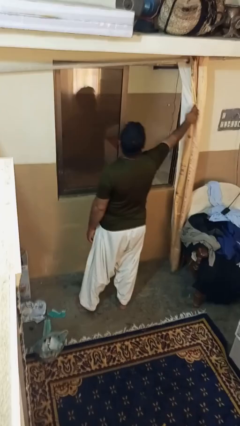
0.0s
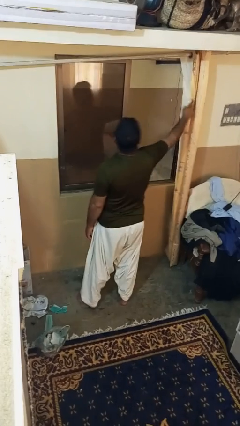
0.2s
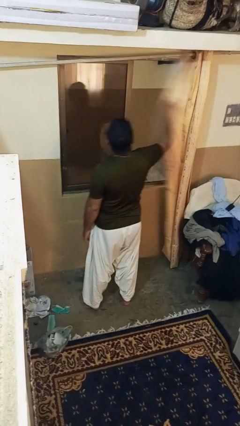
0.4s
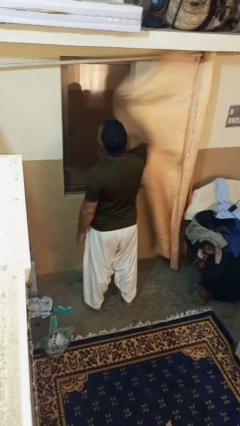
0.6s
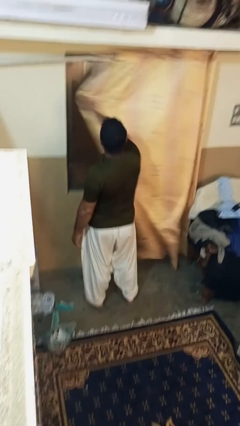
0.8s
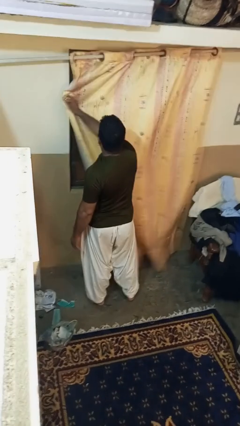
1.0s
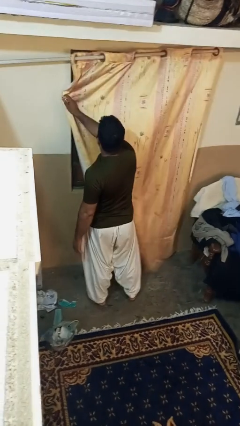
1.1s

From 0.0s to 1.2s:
person closes curtains

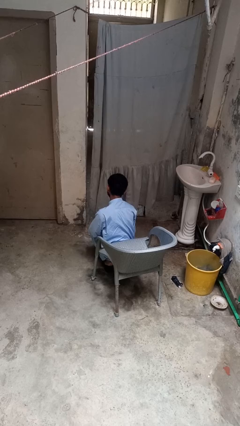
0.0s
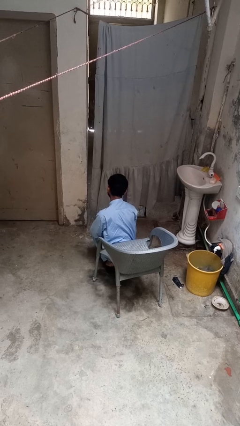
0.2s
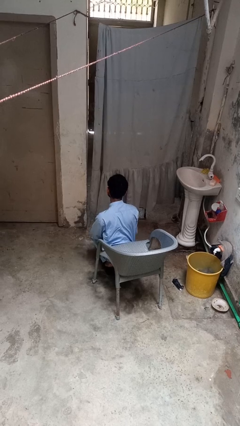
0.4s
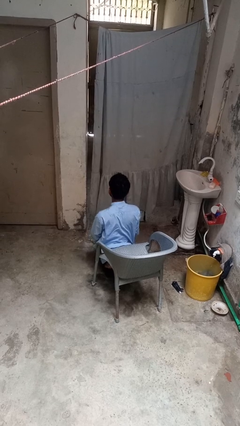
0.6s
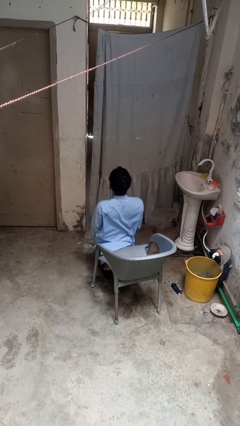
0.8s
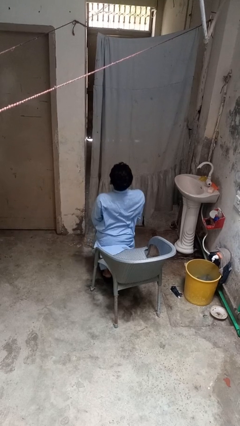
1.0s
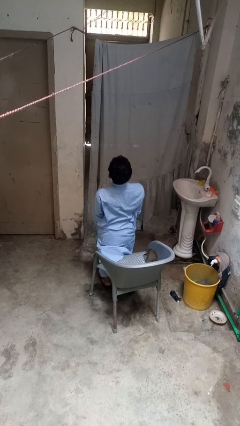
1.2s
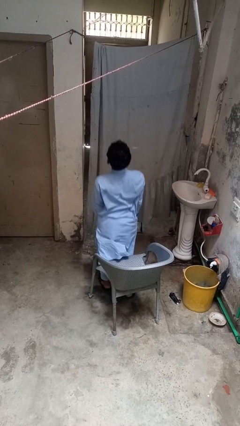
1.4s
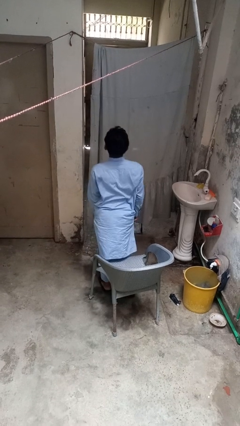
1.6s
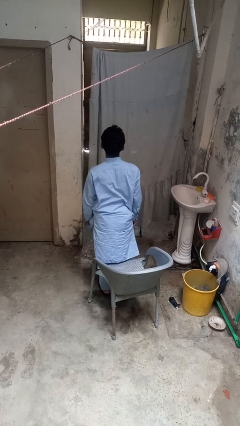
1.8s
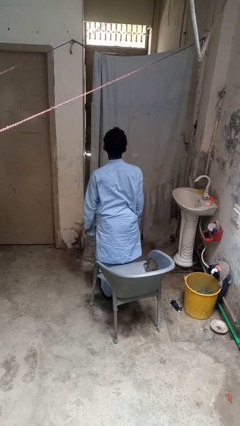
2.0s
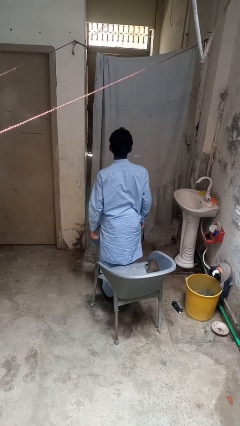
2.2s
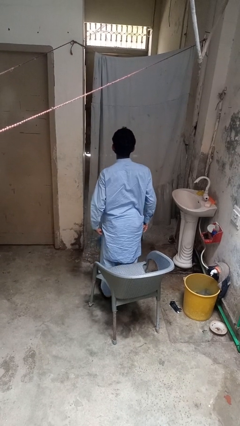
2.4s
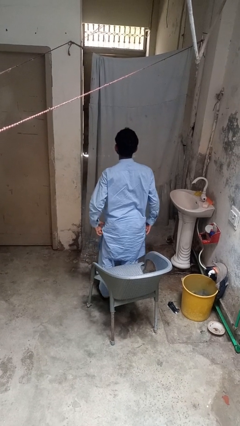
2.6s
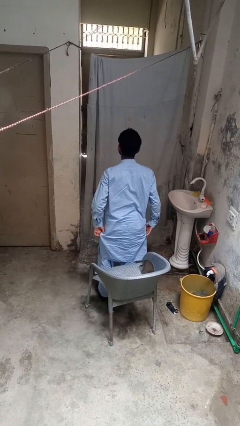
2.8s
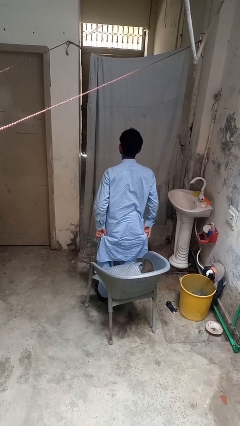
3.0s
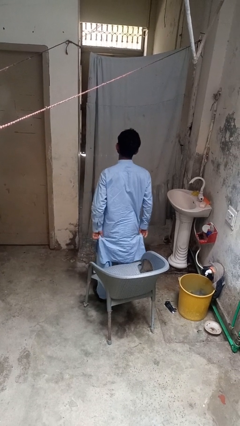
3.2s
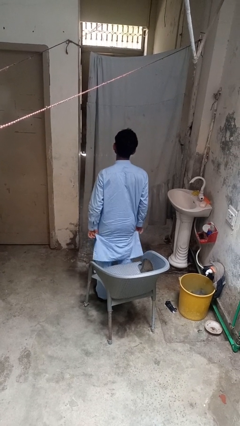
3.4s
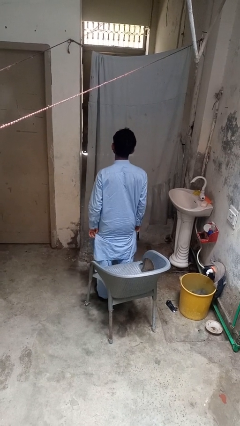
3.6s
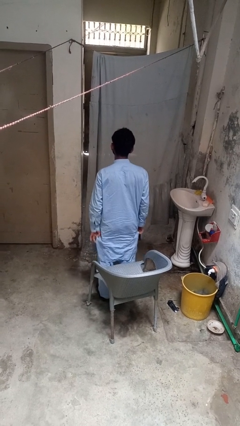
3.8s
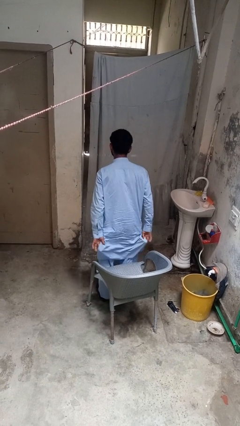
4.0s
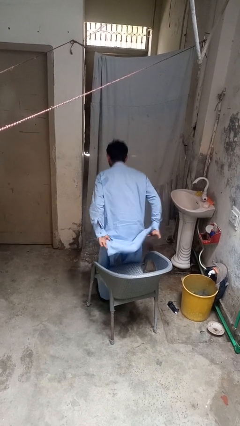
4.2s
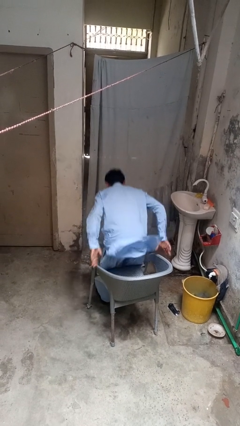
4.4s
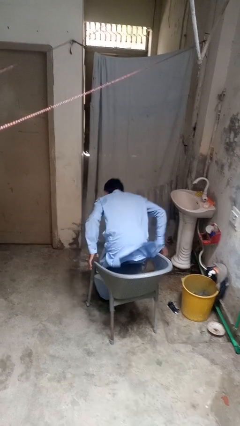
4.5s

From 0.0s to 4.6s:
person stands up from floor

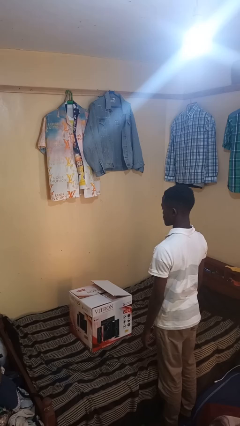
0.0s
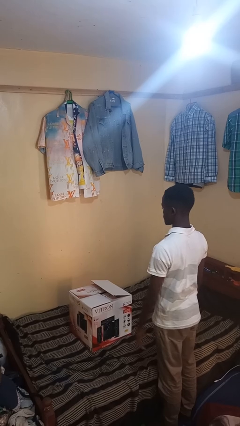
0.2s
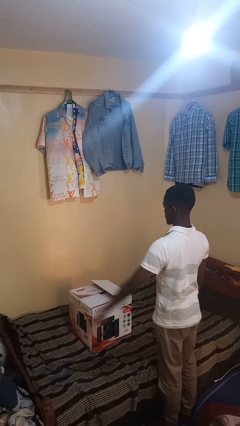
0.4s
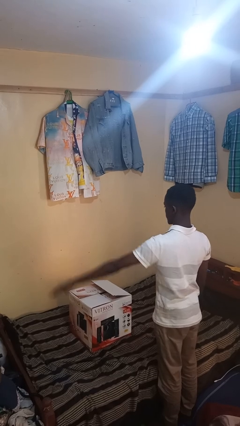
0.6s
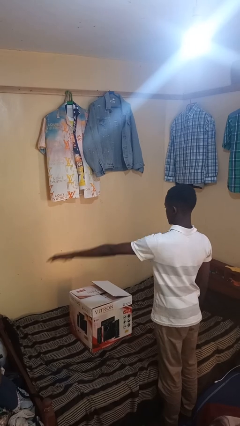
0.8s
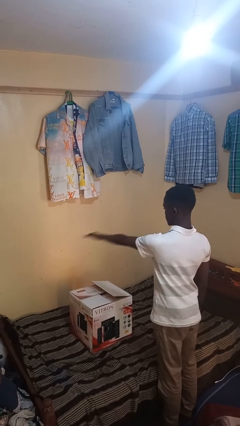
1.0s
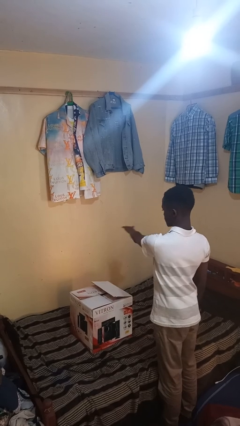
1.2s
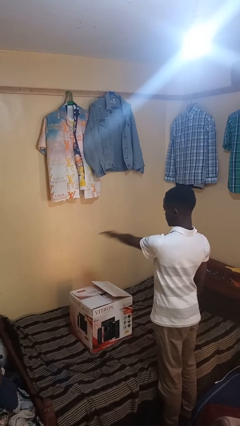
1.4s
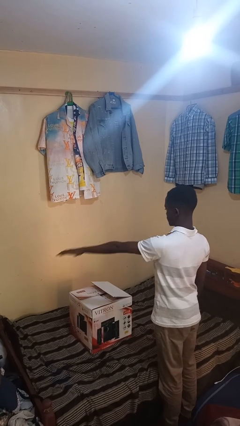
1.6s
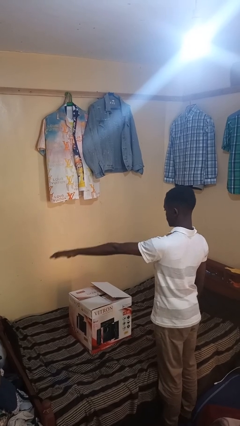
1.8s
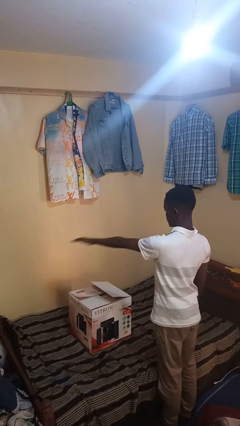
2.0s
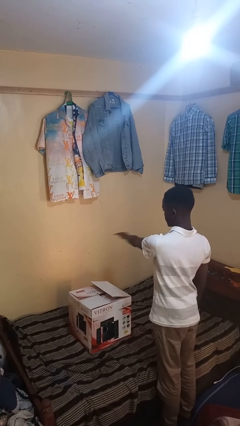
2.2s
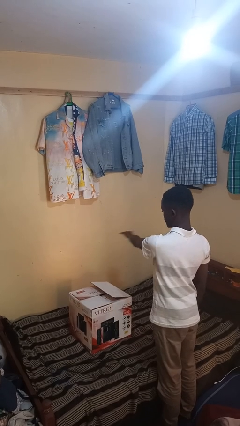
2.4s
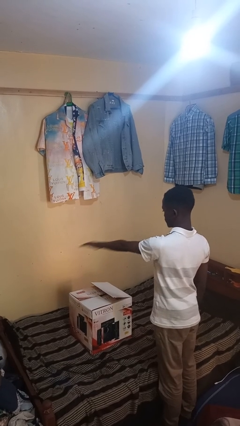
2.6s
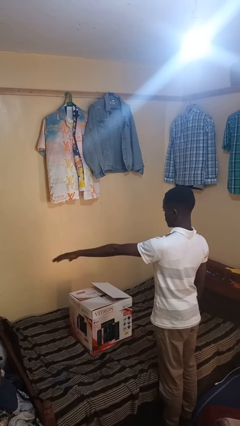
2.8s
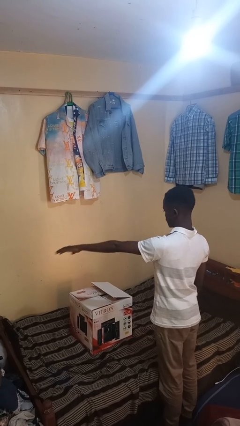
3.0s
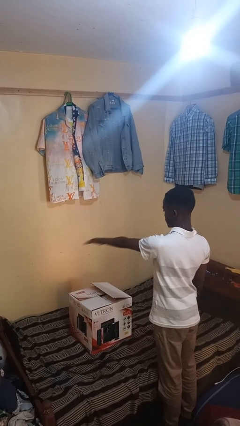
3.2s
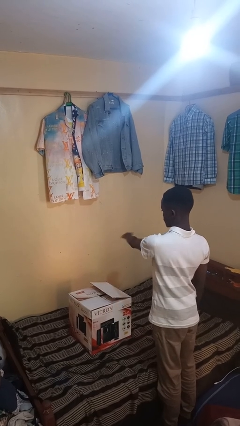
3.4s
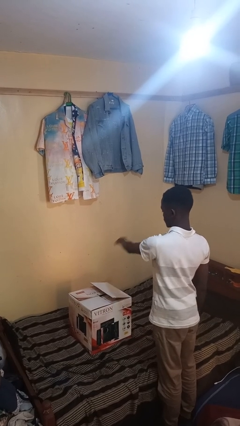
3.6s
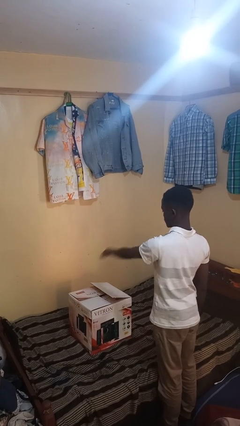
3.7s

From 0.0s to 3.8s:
person waves hand over object

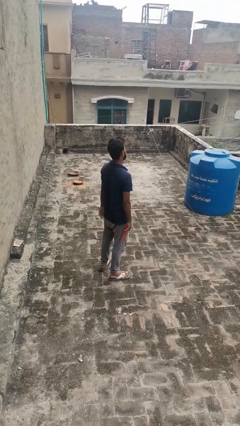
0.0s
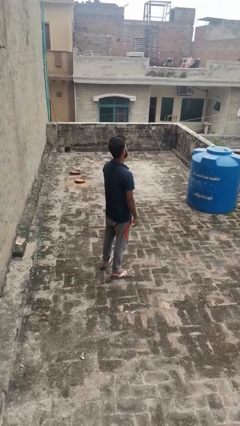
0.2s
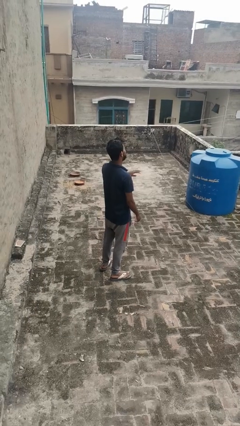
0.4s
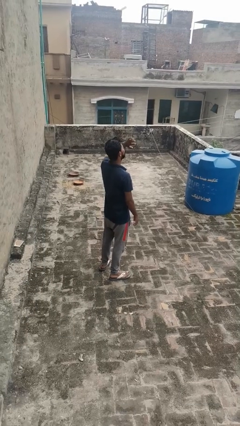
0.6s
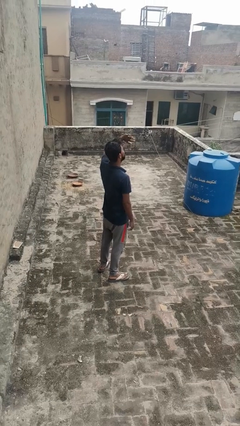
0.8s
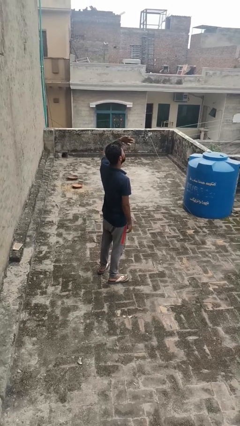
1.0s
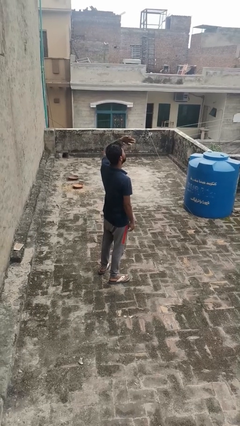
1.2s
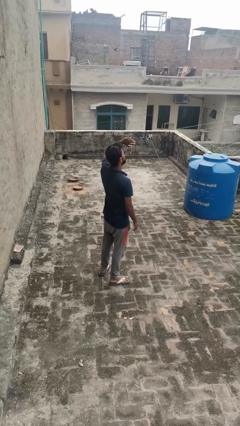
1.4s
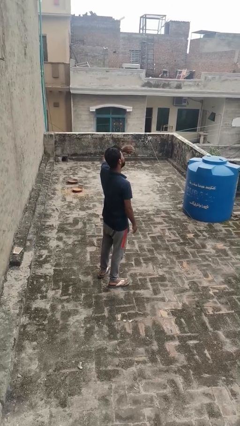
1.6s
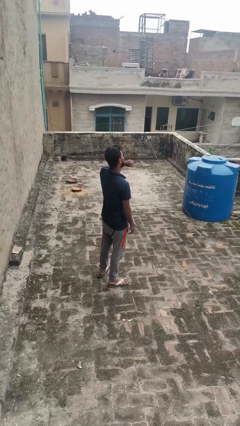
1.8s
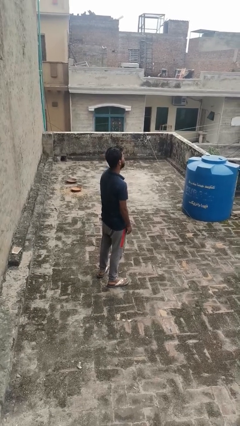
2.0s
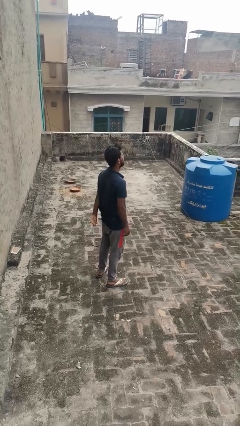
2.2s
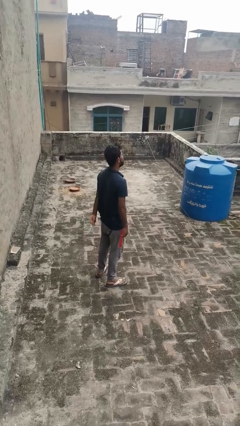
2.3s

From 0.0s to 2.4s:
person shades eyes

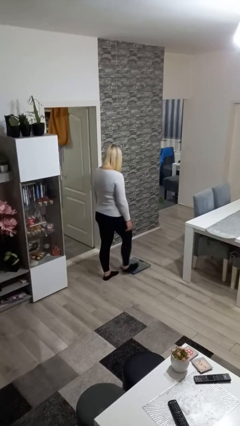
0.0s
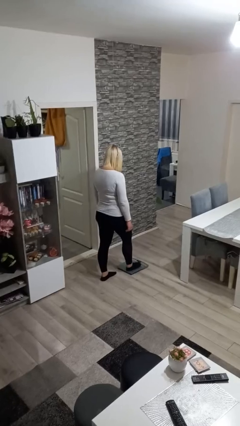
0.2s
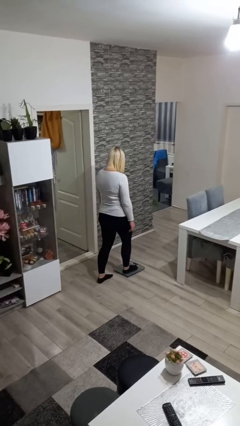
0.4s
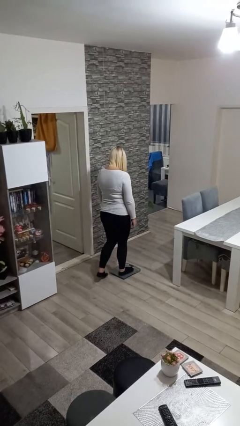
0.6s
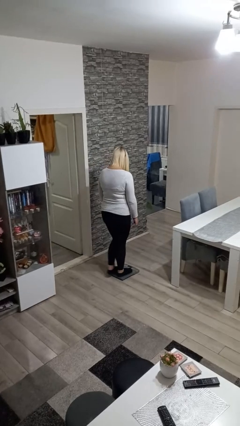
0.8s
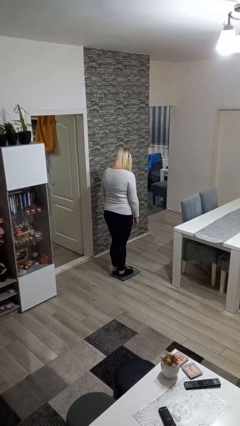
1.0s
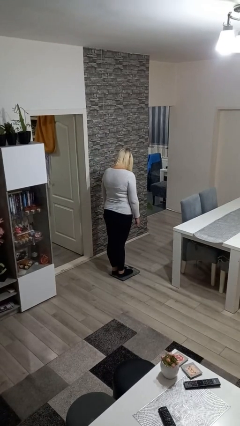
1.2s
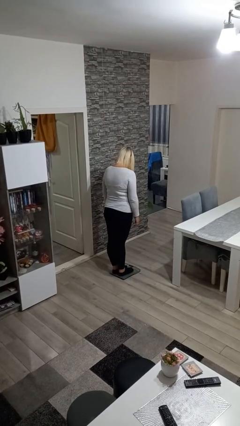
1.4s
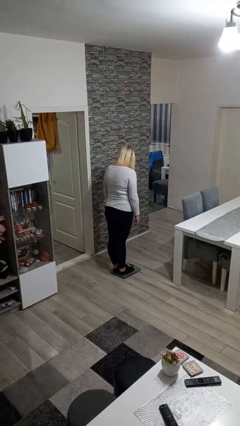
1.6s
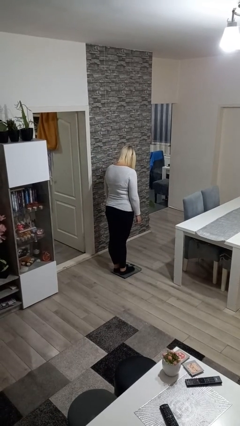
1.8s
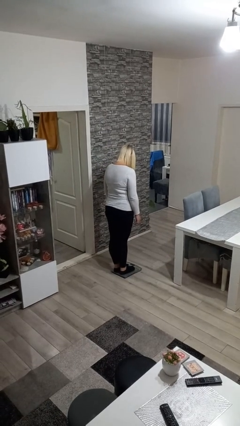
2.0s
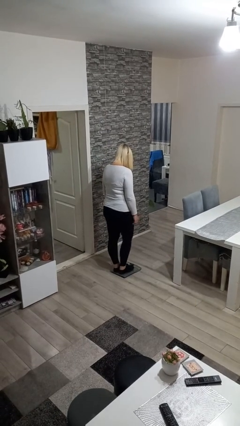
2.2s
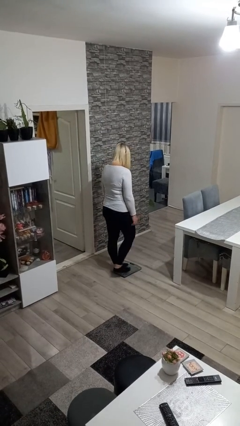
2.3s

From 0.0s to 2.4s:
person uses bodyweight scale

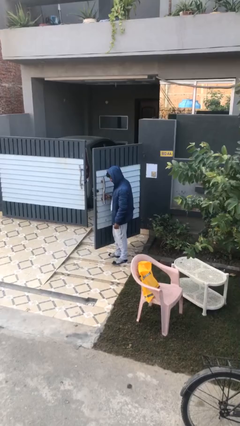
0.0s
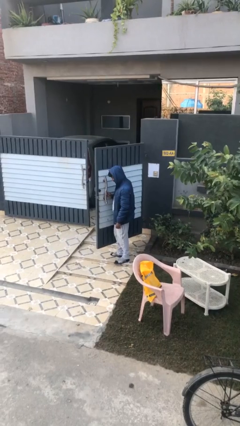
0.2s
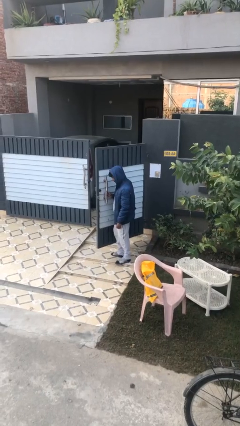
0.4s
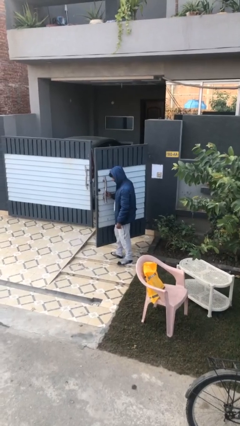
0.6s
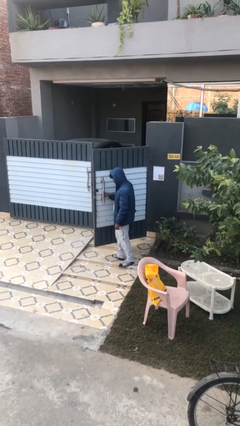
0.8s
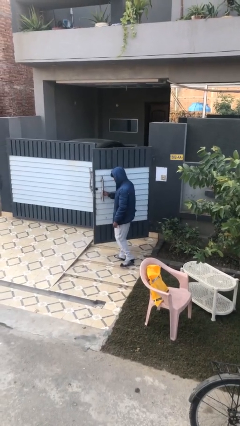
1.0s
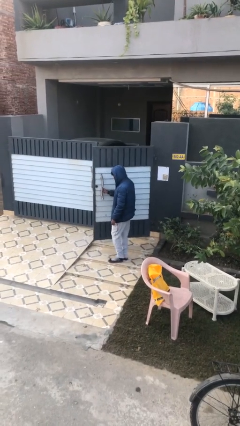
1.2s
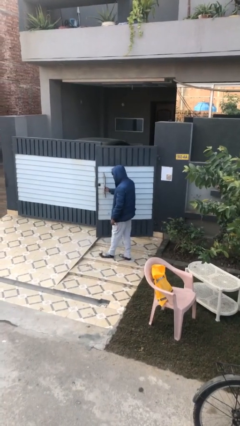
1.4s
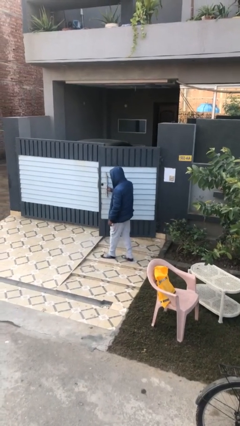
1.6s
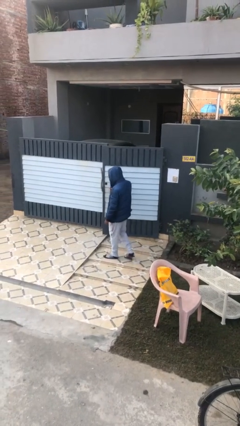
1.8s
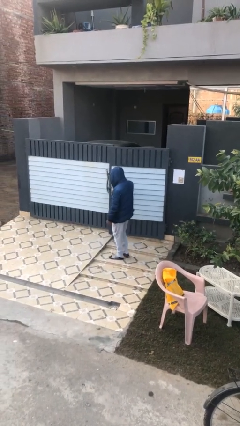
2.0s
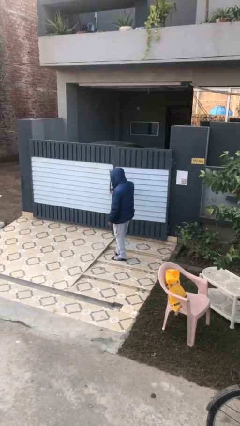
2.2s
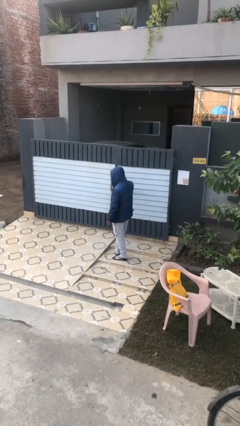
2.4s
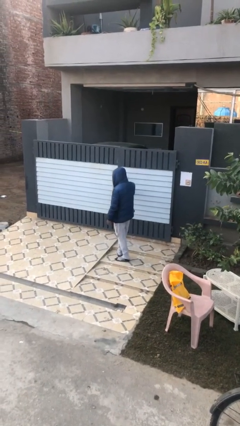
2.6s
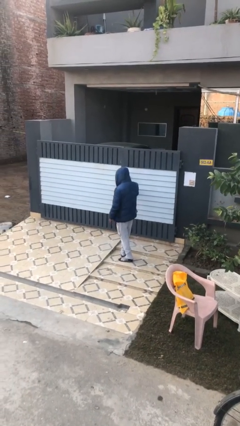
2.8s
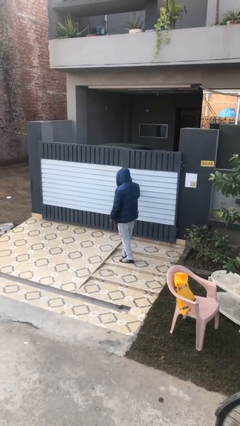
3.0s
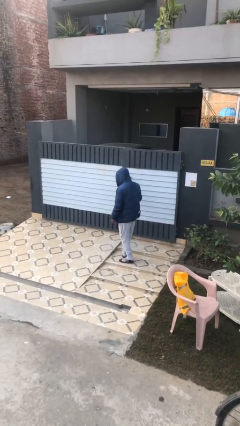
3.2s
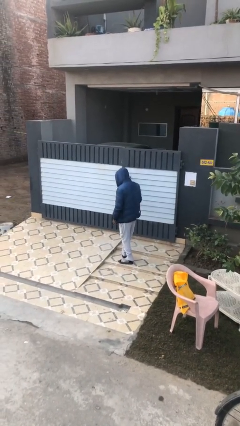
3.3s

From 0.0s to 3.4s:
person closes facility door
